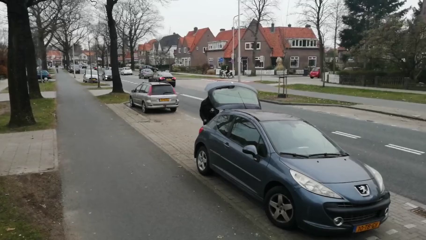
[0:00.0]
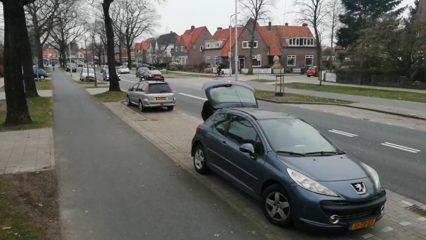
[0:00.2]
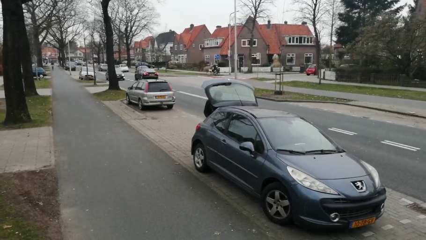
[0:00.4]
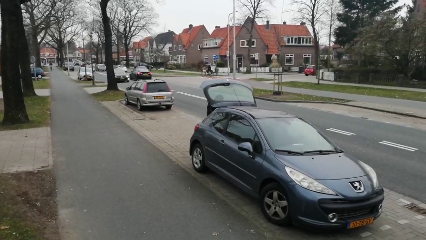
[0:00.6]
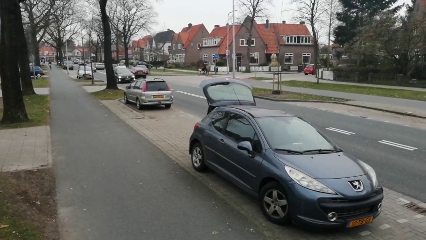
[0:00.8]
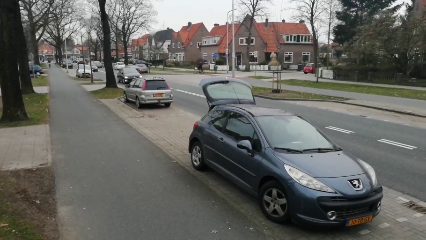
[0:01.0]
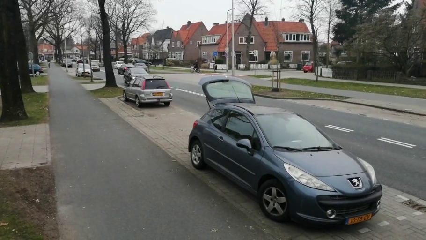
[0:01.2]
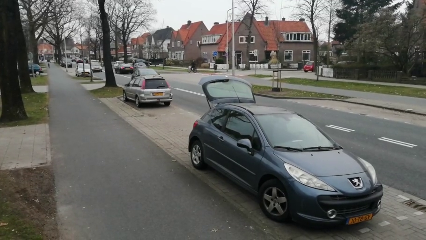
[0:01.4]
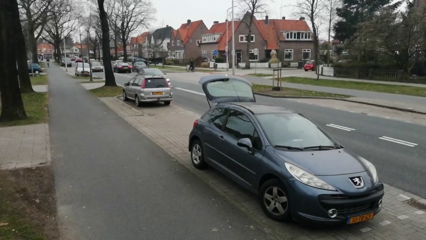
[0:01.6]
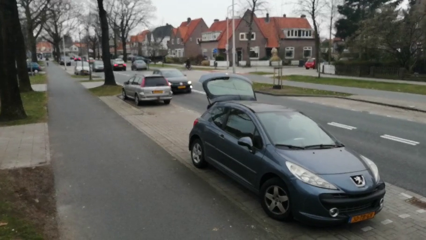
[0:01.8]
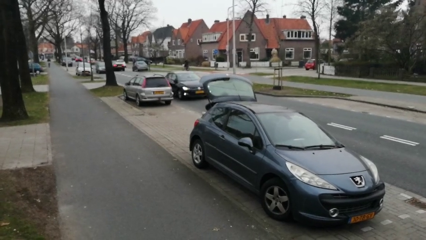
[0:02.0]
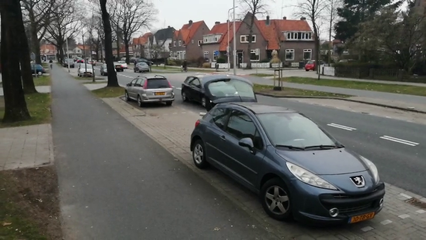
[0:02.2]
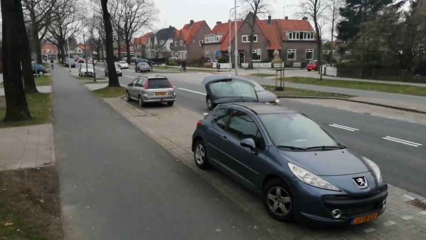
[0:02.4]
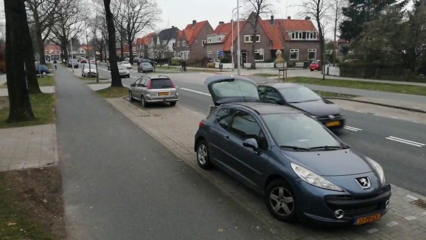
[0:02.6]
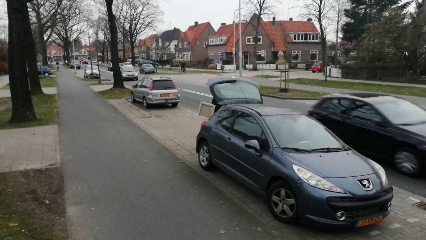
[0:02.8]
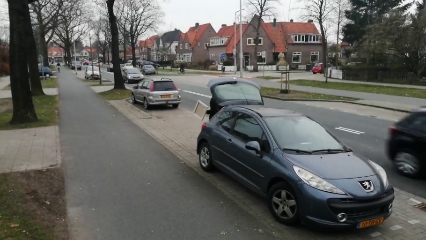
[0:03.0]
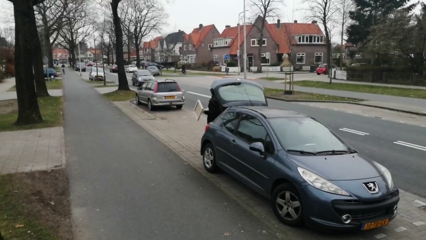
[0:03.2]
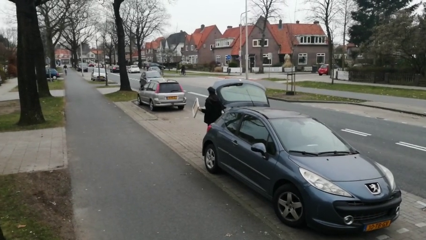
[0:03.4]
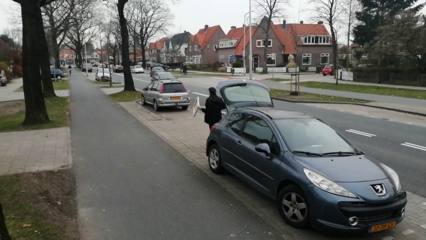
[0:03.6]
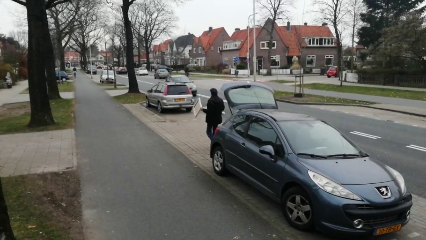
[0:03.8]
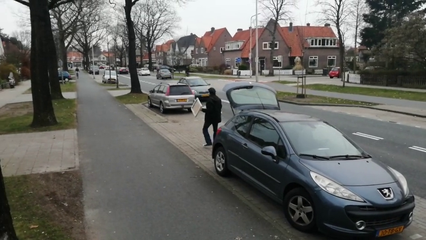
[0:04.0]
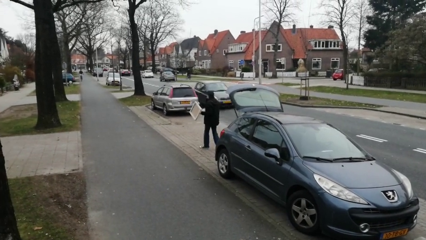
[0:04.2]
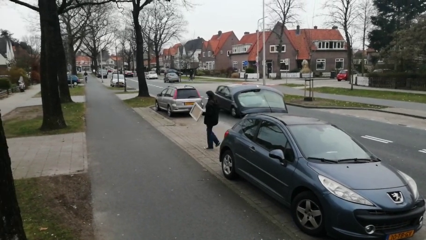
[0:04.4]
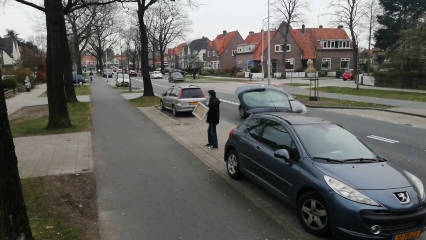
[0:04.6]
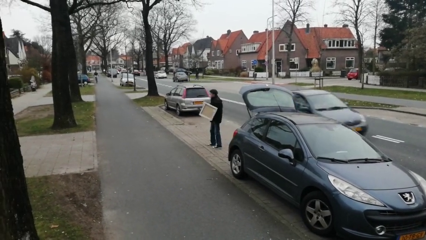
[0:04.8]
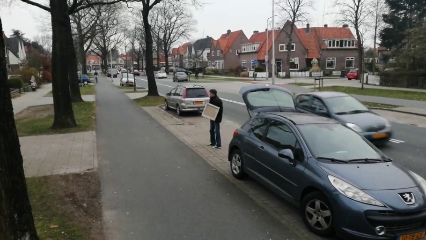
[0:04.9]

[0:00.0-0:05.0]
person unloads car

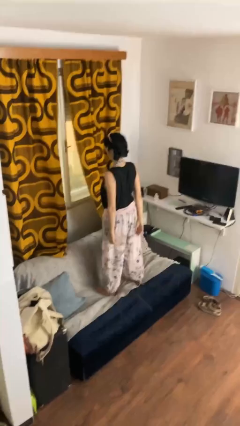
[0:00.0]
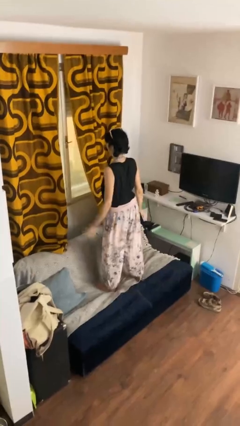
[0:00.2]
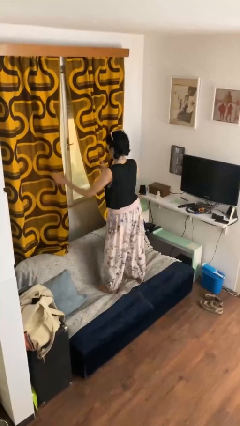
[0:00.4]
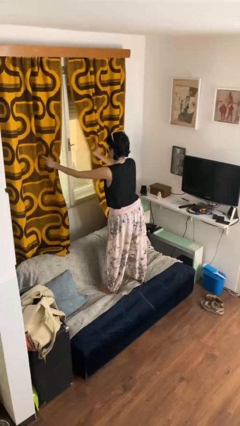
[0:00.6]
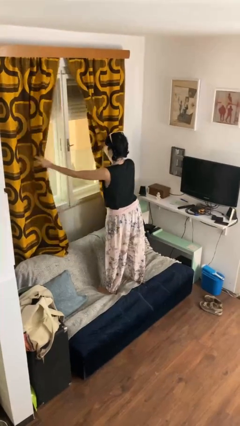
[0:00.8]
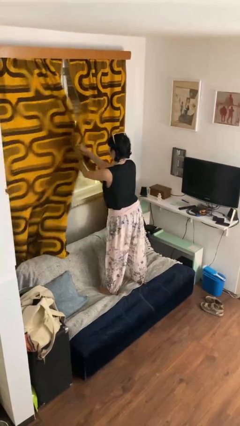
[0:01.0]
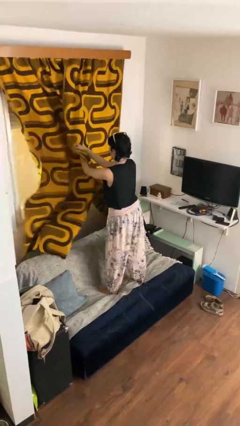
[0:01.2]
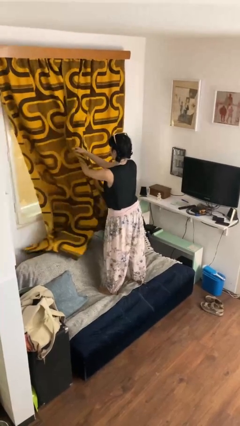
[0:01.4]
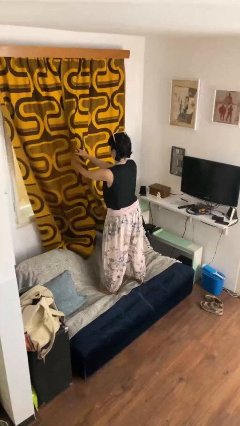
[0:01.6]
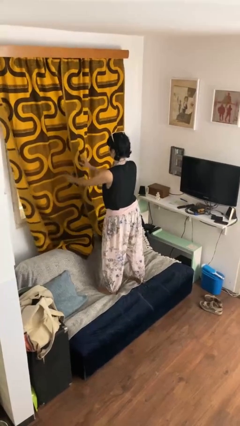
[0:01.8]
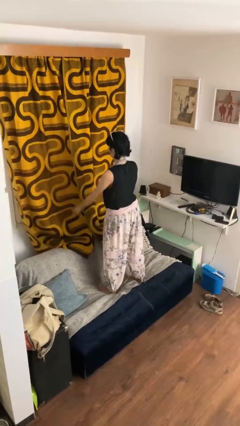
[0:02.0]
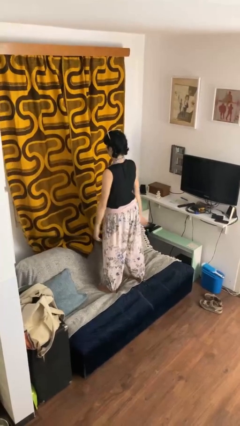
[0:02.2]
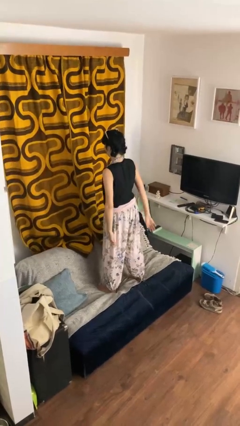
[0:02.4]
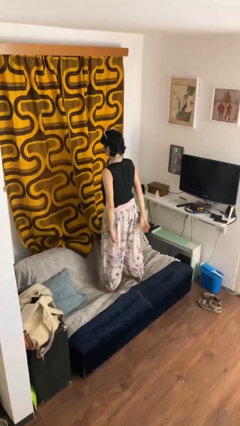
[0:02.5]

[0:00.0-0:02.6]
person closes curtains

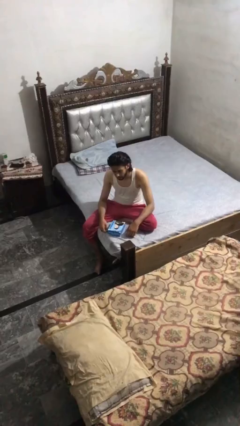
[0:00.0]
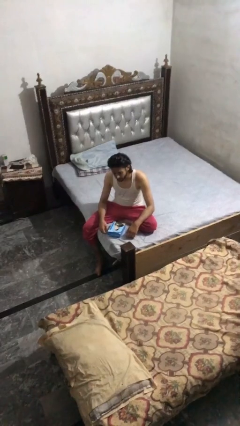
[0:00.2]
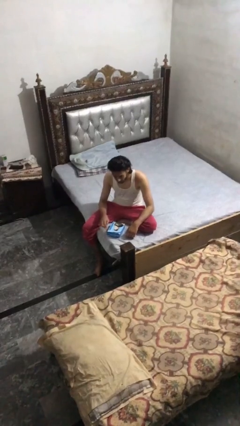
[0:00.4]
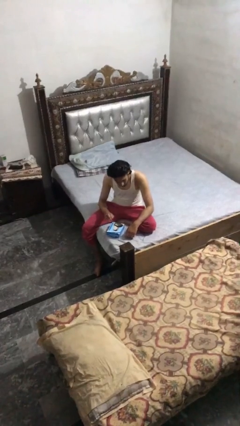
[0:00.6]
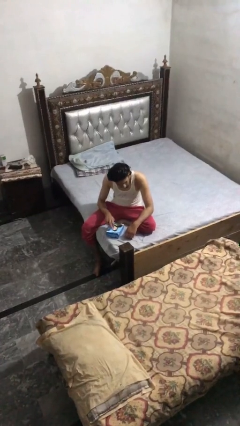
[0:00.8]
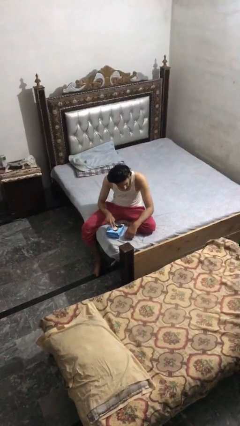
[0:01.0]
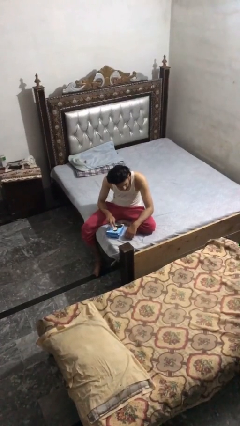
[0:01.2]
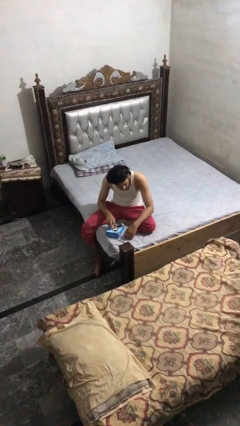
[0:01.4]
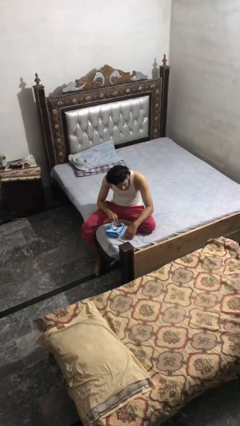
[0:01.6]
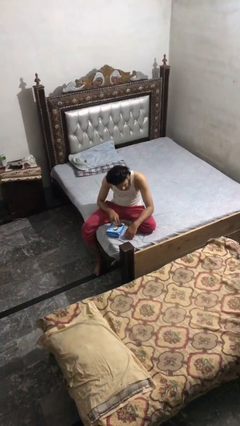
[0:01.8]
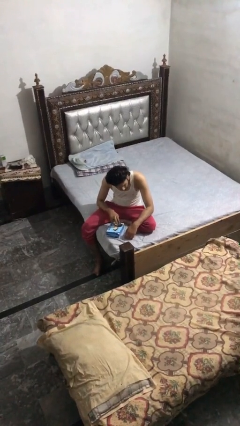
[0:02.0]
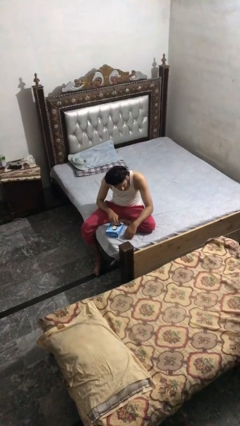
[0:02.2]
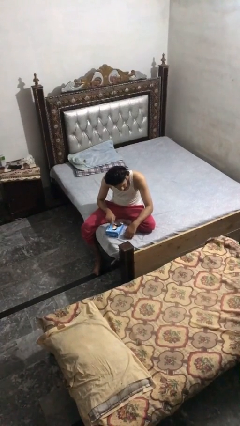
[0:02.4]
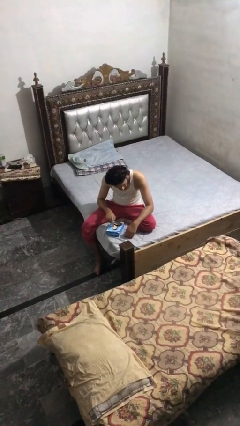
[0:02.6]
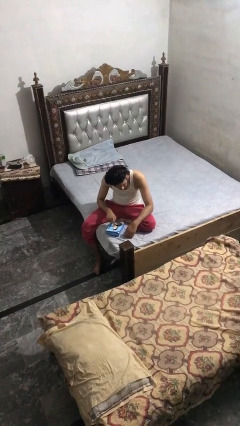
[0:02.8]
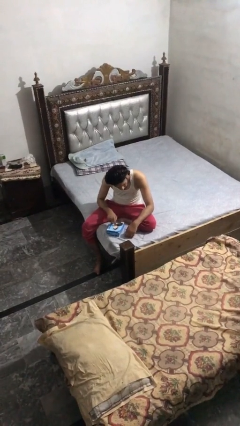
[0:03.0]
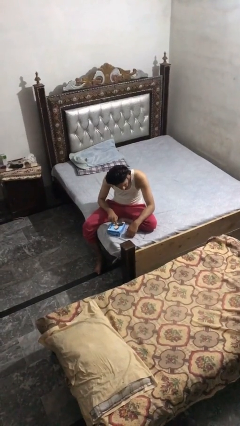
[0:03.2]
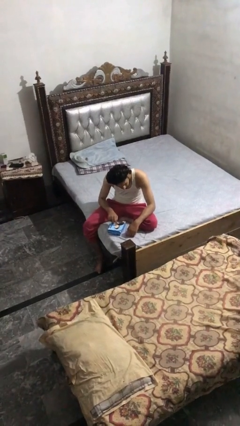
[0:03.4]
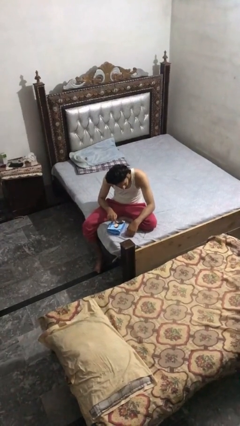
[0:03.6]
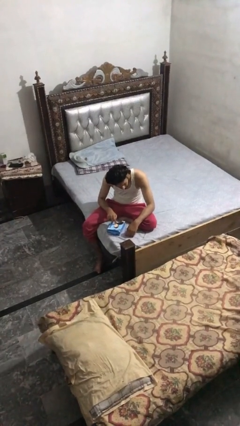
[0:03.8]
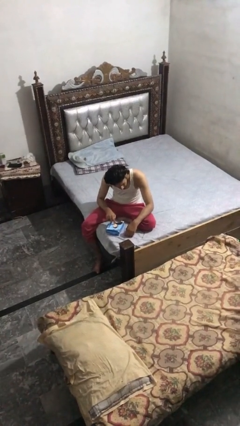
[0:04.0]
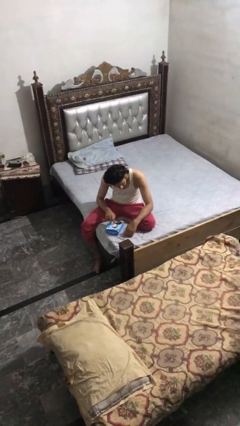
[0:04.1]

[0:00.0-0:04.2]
person taps object with finger

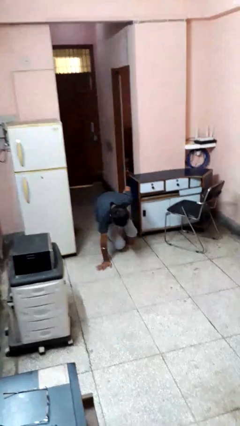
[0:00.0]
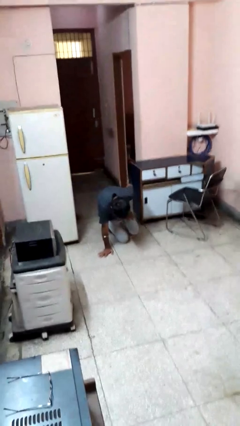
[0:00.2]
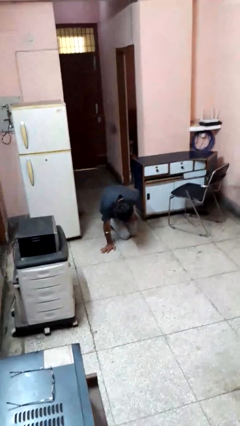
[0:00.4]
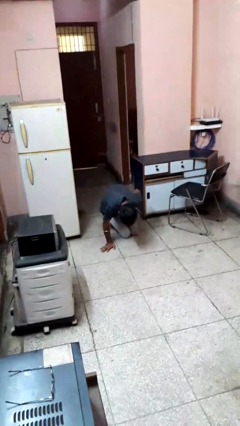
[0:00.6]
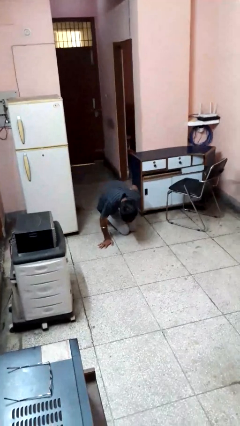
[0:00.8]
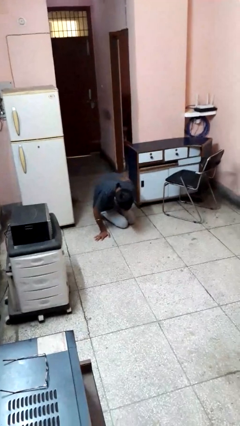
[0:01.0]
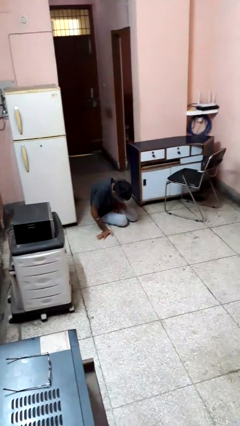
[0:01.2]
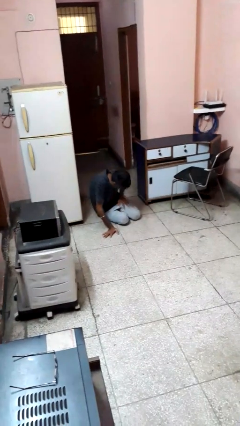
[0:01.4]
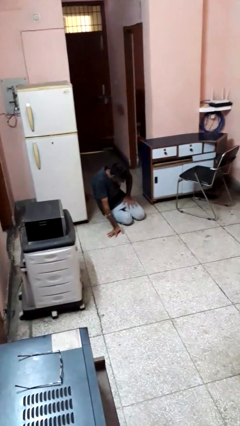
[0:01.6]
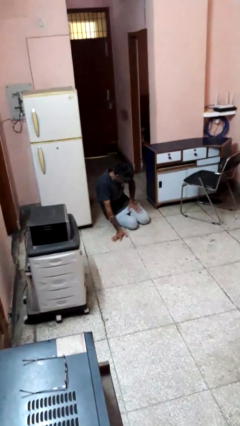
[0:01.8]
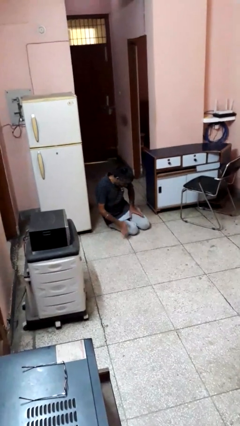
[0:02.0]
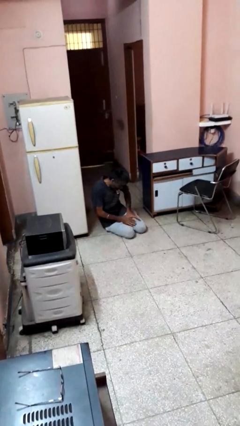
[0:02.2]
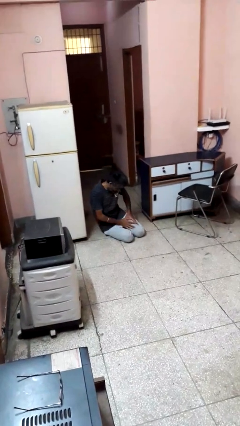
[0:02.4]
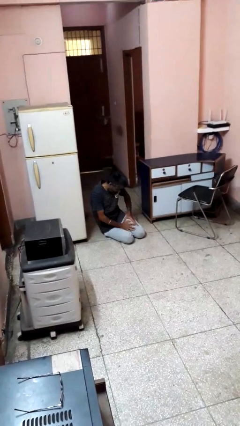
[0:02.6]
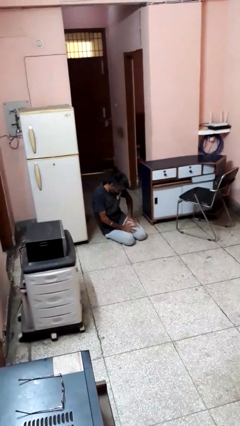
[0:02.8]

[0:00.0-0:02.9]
person lies down on floor

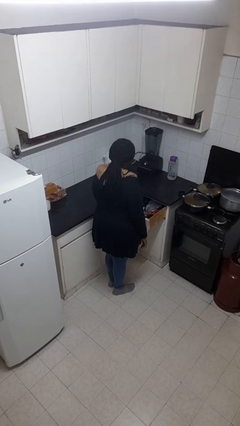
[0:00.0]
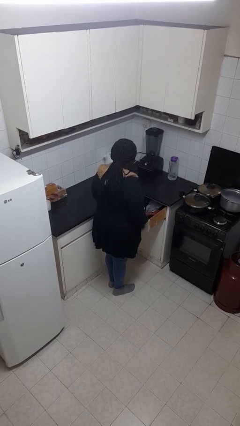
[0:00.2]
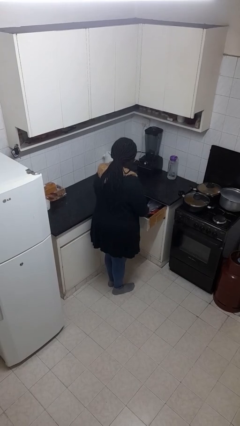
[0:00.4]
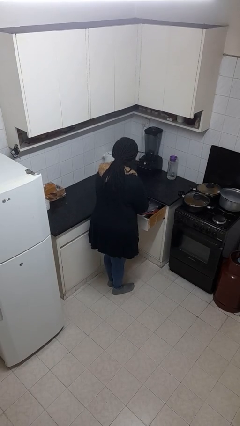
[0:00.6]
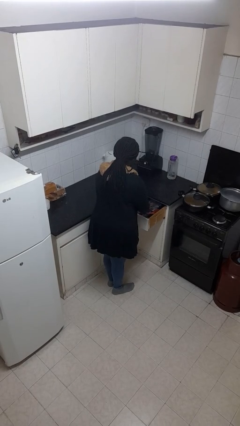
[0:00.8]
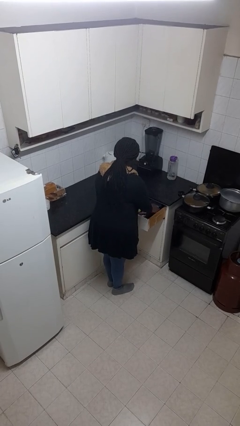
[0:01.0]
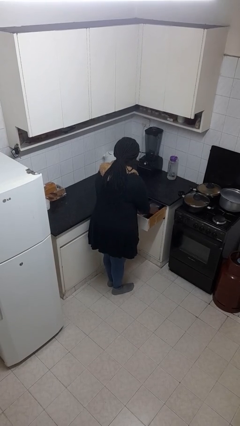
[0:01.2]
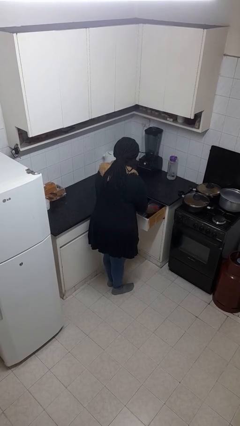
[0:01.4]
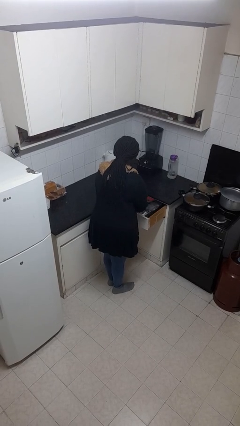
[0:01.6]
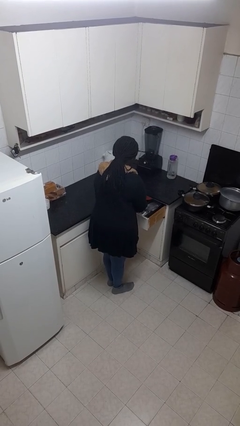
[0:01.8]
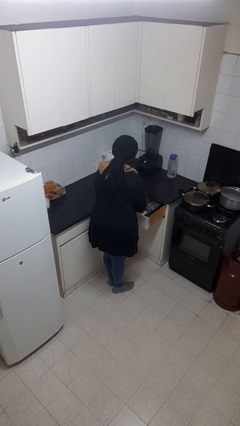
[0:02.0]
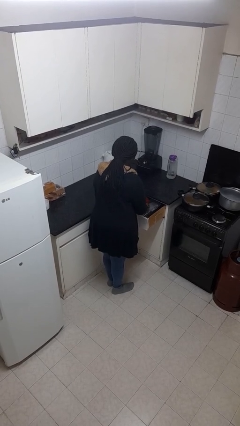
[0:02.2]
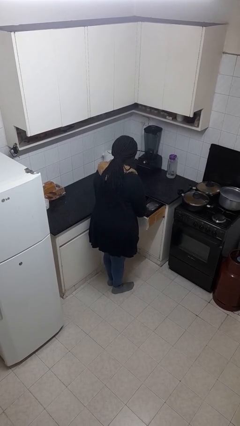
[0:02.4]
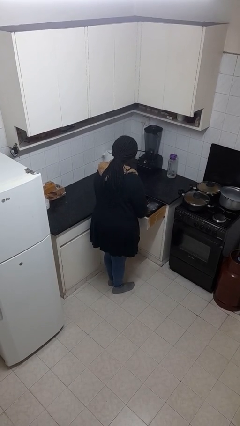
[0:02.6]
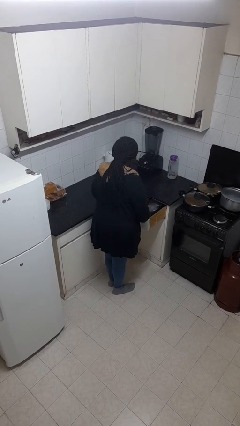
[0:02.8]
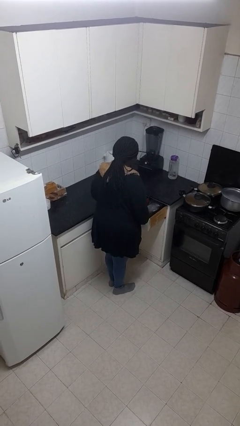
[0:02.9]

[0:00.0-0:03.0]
person searches in kitchen drawer

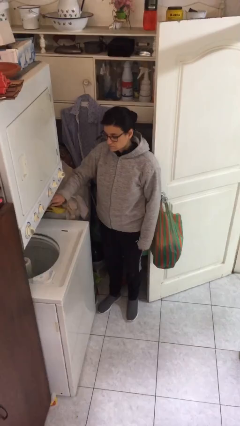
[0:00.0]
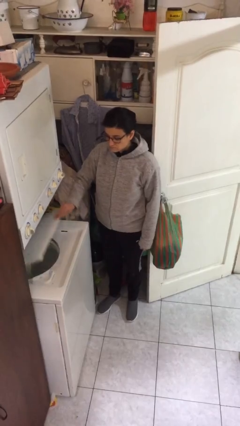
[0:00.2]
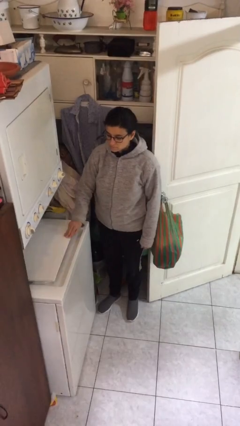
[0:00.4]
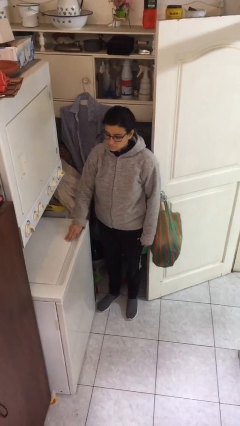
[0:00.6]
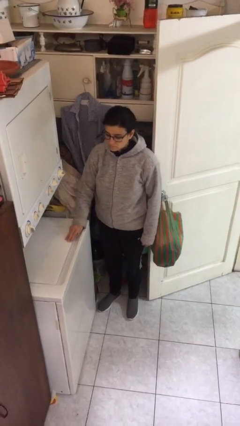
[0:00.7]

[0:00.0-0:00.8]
person closes clothes washer
